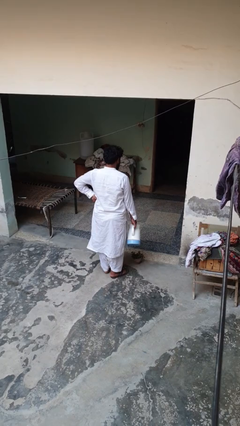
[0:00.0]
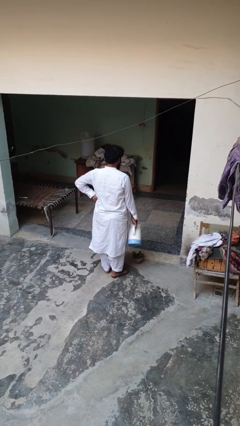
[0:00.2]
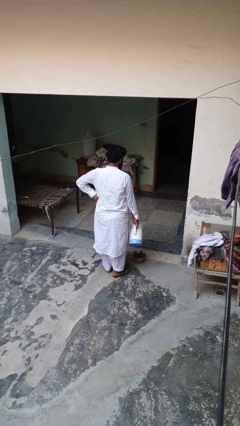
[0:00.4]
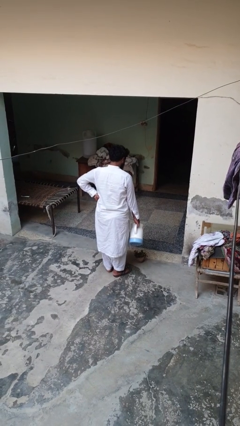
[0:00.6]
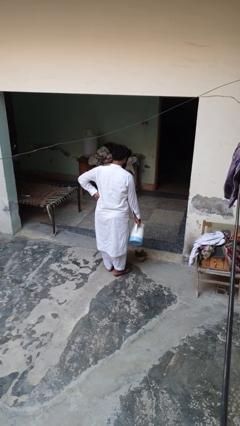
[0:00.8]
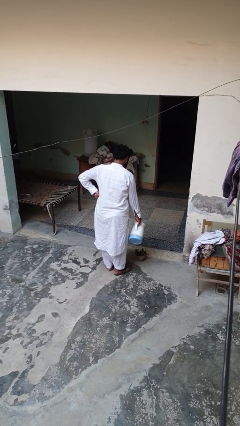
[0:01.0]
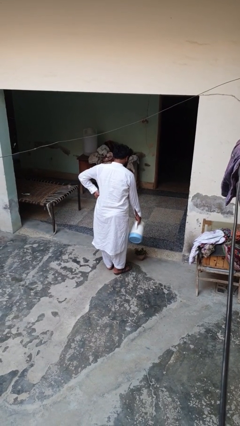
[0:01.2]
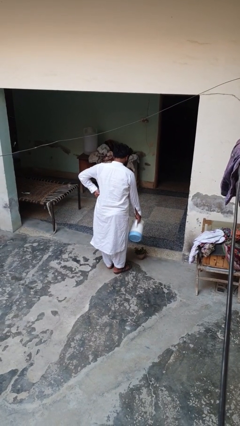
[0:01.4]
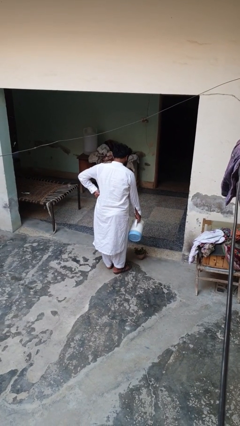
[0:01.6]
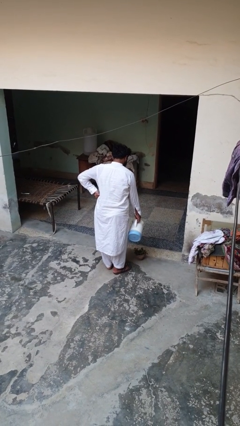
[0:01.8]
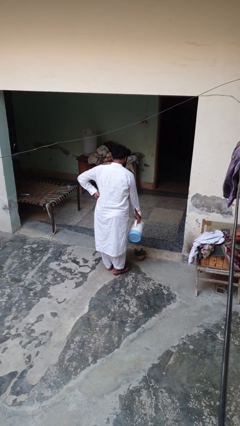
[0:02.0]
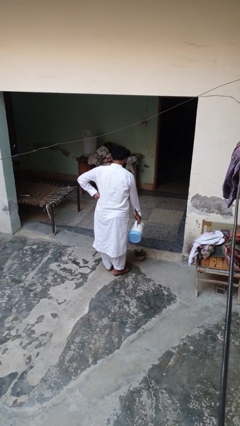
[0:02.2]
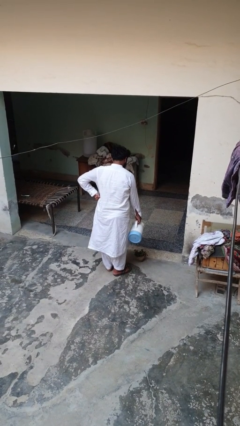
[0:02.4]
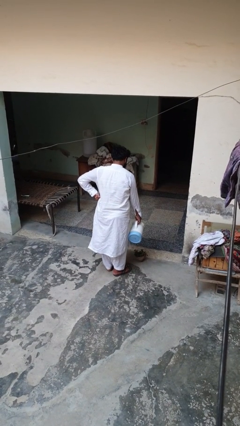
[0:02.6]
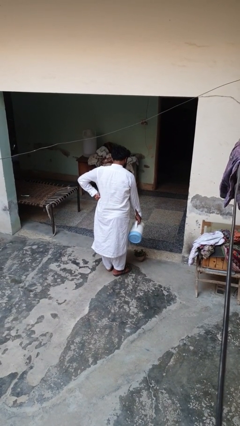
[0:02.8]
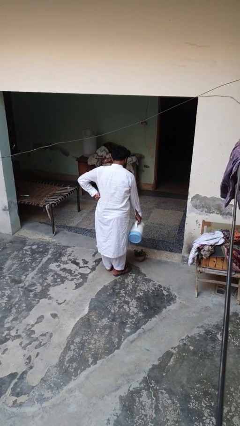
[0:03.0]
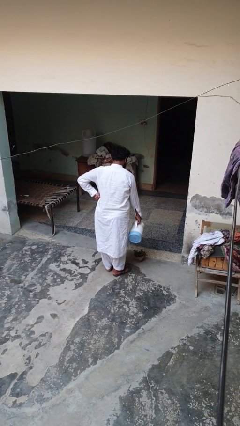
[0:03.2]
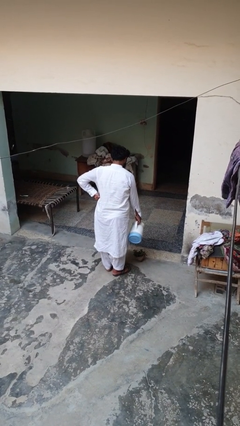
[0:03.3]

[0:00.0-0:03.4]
person waters houseplant

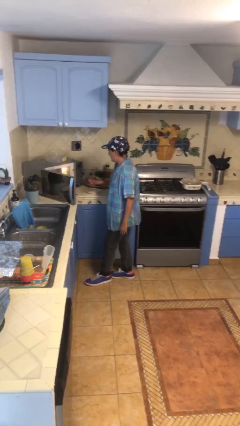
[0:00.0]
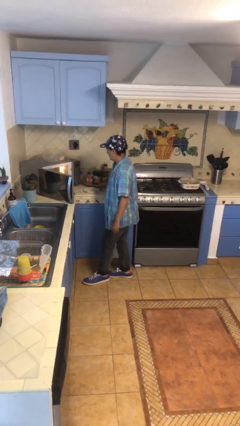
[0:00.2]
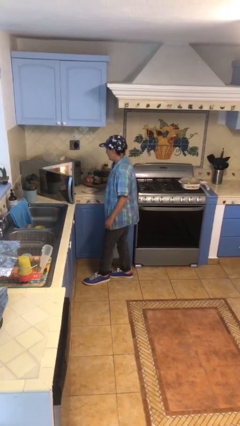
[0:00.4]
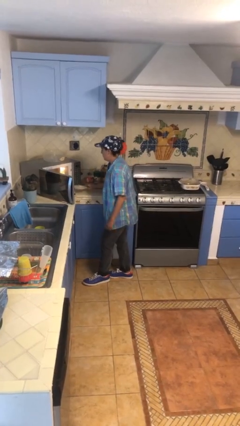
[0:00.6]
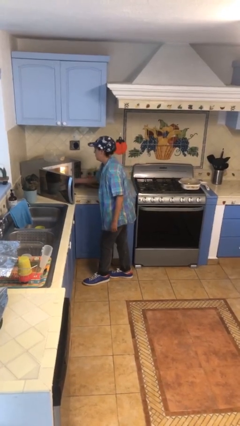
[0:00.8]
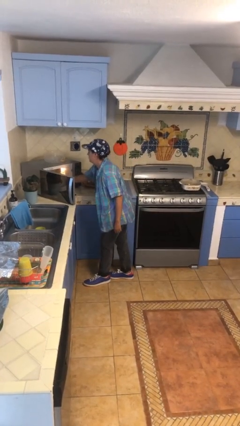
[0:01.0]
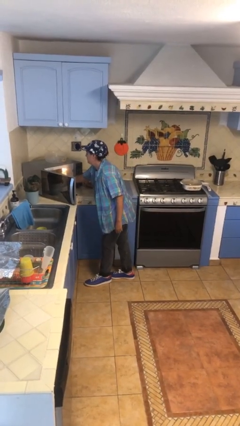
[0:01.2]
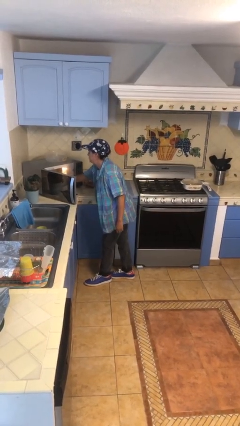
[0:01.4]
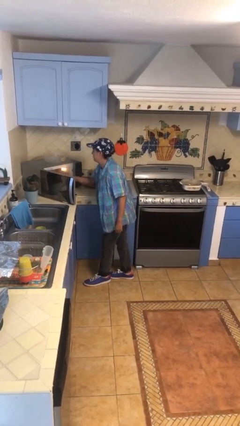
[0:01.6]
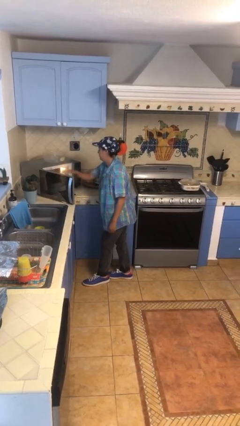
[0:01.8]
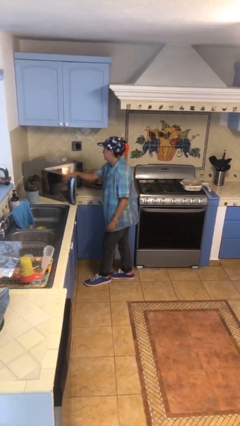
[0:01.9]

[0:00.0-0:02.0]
person puts object into microwave

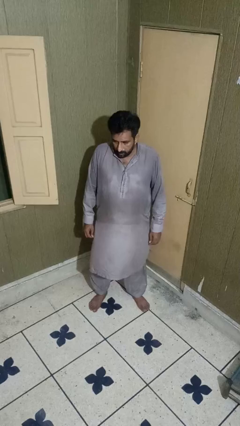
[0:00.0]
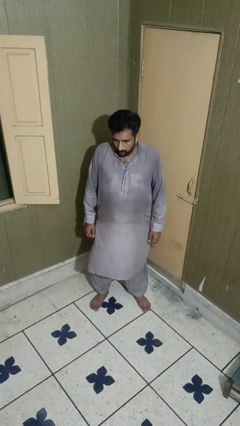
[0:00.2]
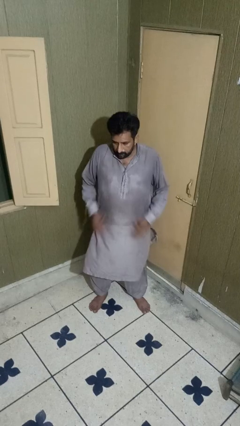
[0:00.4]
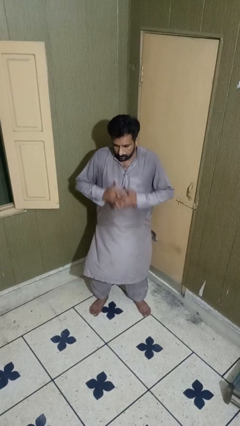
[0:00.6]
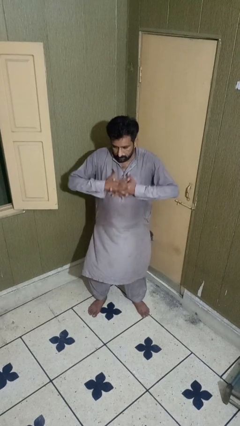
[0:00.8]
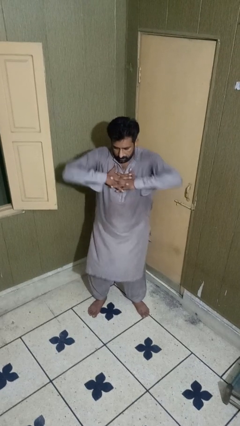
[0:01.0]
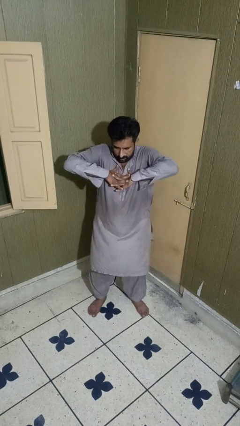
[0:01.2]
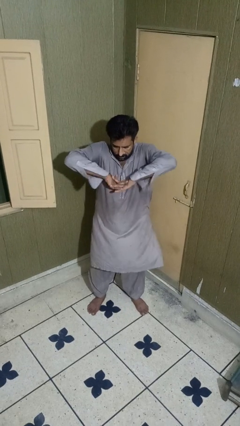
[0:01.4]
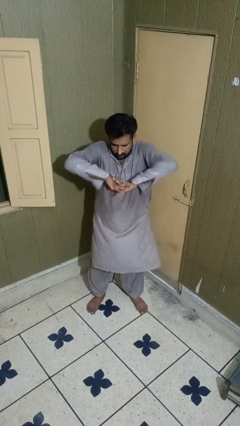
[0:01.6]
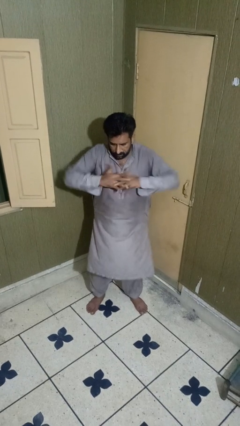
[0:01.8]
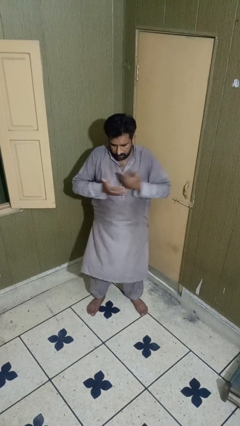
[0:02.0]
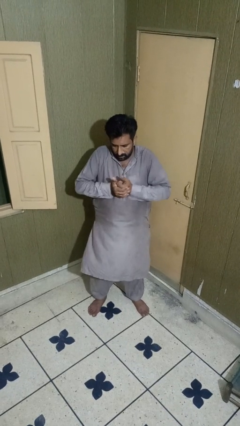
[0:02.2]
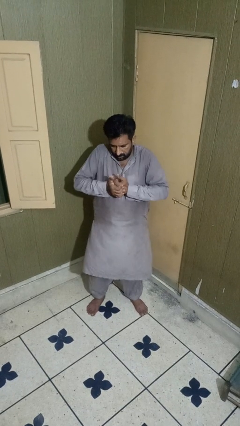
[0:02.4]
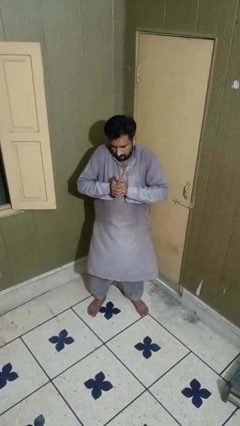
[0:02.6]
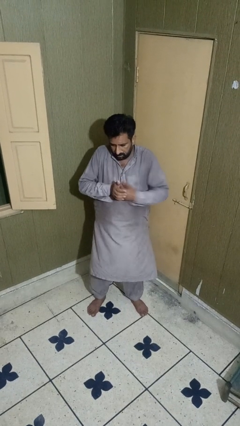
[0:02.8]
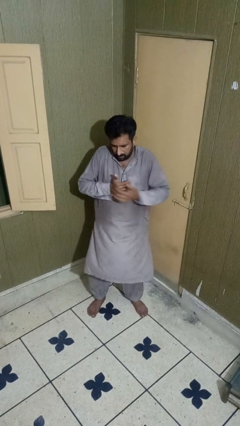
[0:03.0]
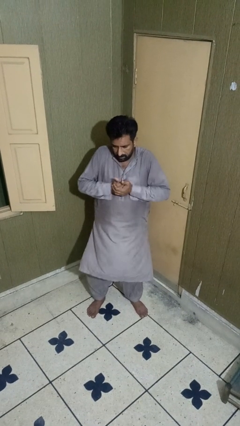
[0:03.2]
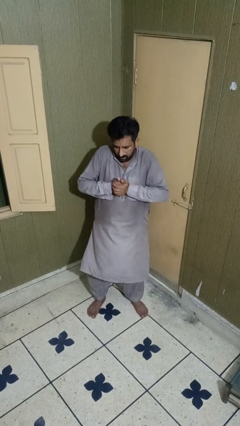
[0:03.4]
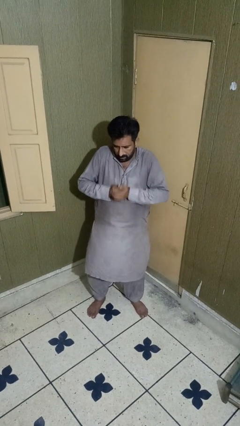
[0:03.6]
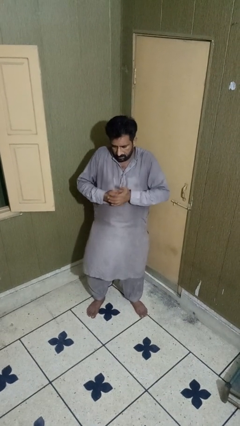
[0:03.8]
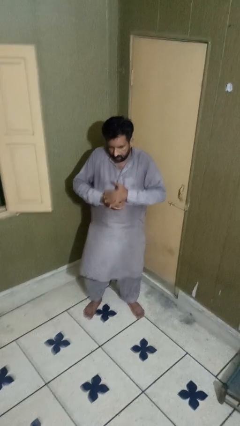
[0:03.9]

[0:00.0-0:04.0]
person cracks knuckles

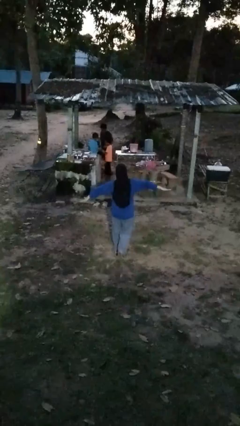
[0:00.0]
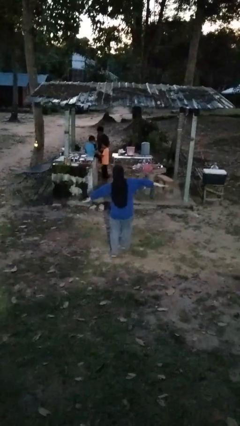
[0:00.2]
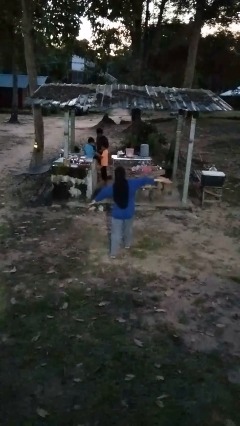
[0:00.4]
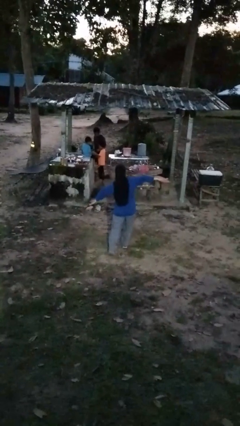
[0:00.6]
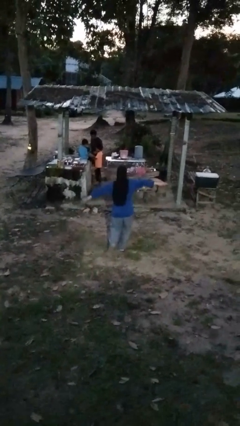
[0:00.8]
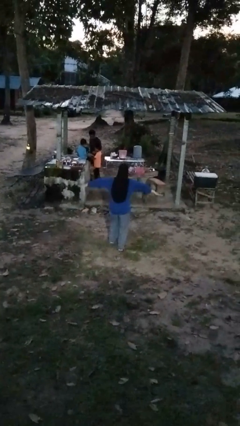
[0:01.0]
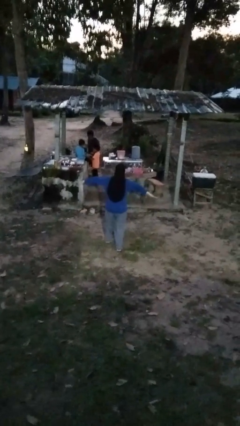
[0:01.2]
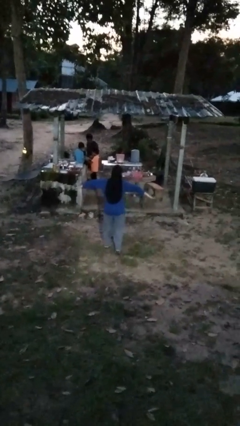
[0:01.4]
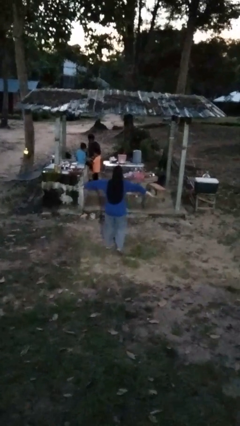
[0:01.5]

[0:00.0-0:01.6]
person walks tiptoe

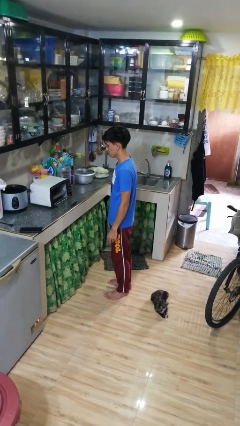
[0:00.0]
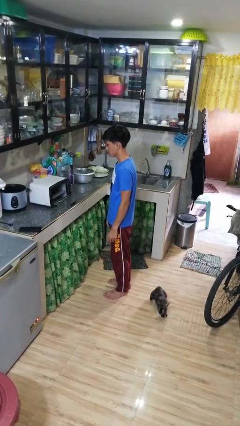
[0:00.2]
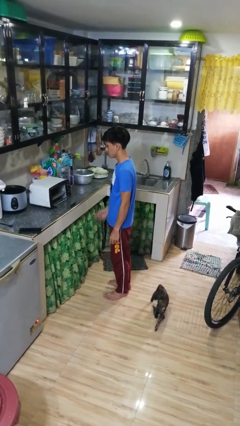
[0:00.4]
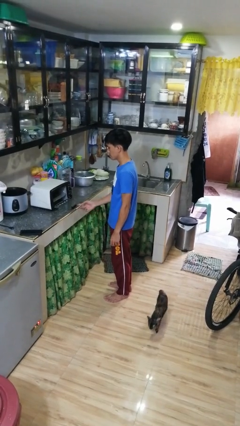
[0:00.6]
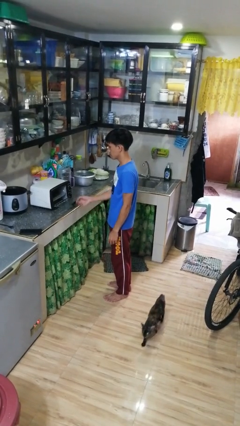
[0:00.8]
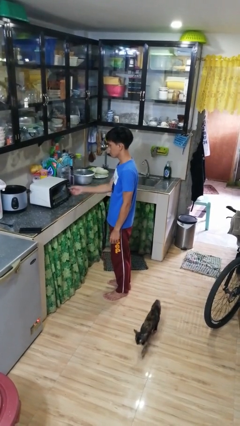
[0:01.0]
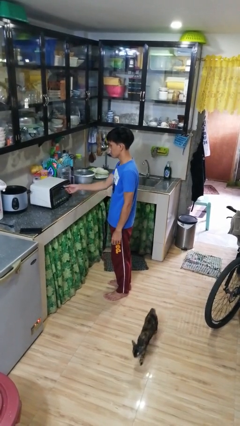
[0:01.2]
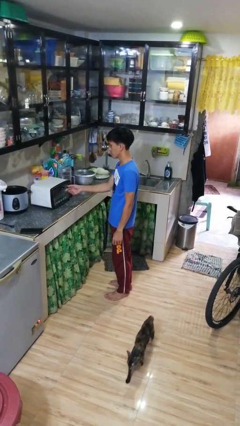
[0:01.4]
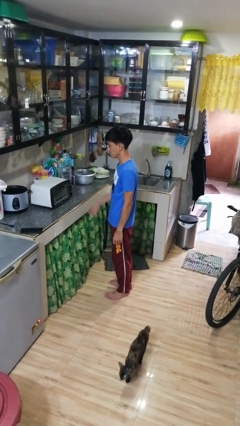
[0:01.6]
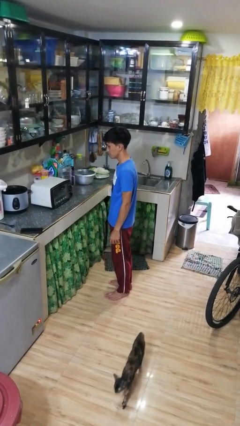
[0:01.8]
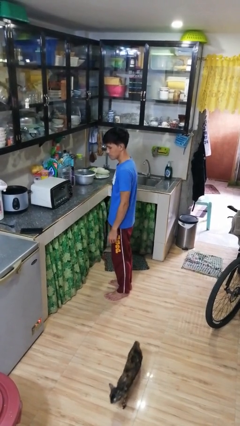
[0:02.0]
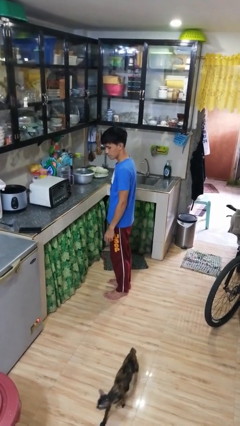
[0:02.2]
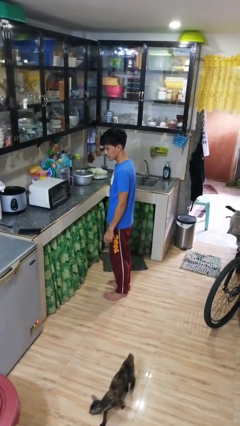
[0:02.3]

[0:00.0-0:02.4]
person closes microwave

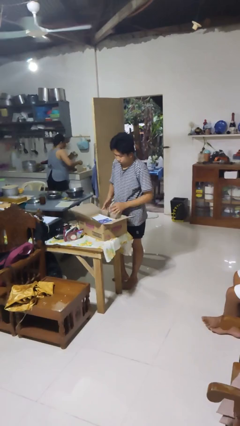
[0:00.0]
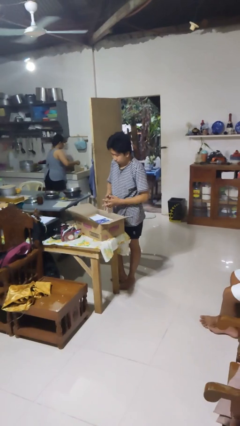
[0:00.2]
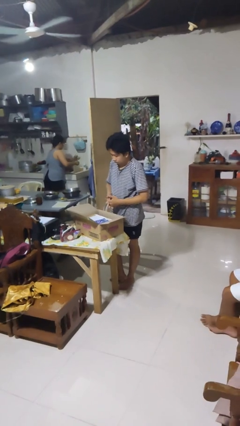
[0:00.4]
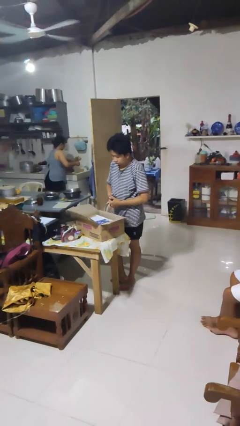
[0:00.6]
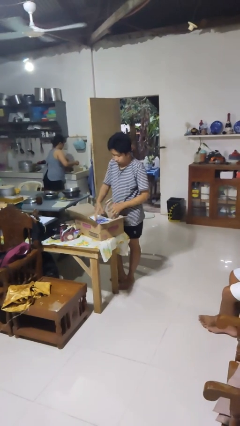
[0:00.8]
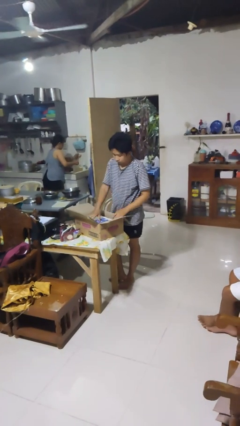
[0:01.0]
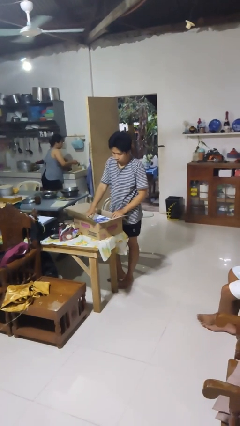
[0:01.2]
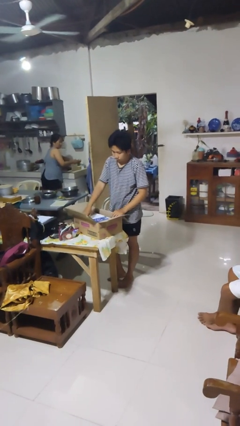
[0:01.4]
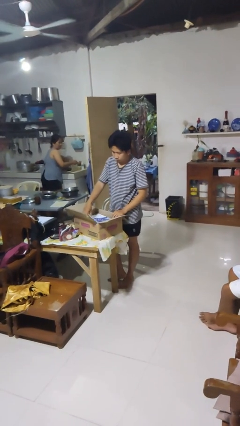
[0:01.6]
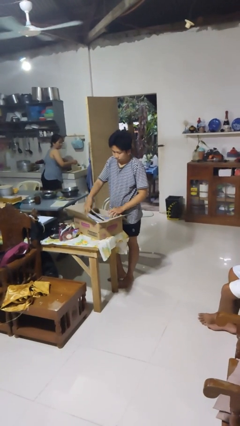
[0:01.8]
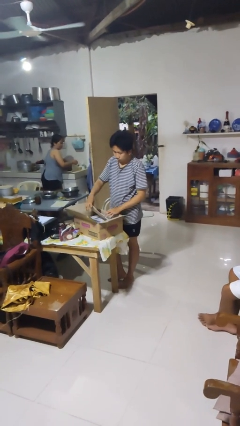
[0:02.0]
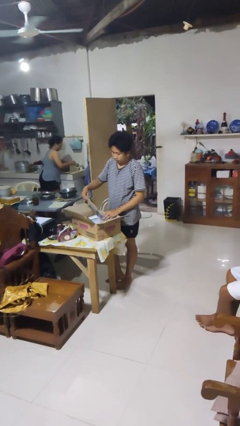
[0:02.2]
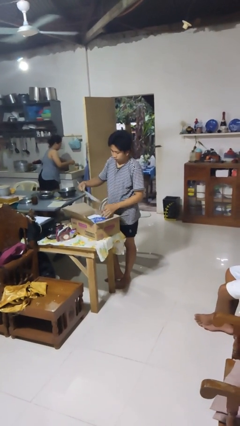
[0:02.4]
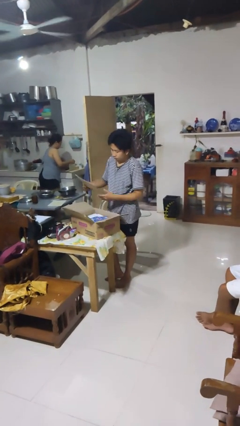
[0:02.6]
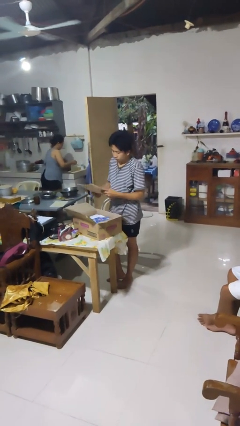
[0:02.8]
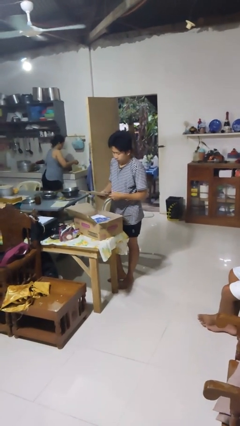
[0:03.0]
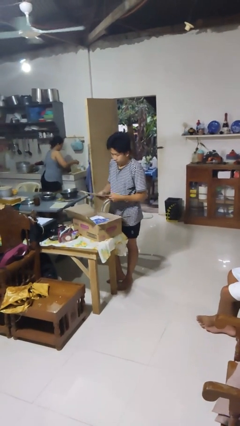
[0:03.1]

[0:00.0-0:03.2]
person takes object from box

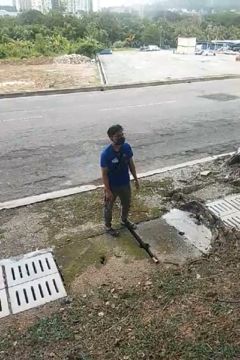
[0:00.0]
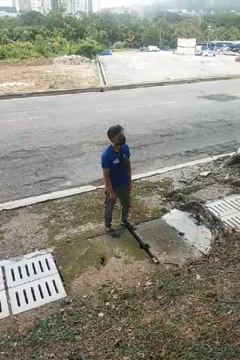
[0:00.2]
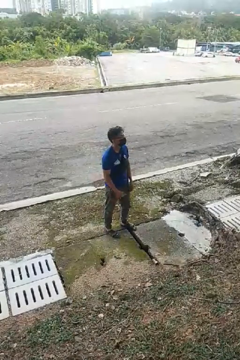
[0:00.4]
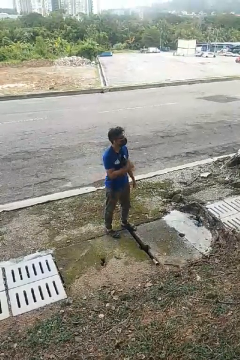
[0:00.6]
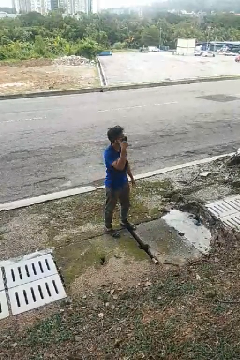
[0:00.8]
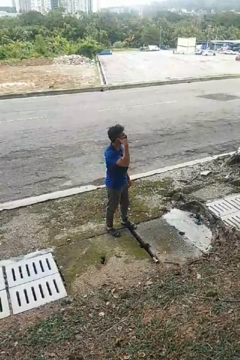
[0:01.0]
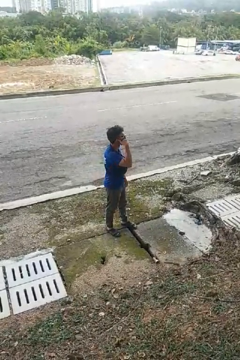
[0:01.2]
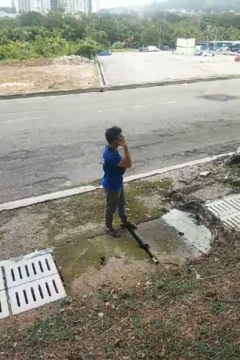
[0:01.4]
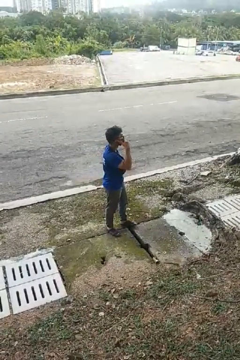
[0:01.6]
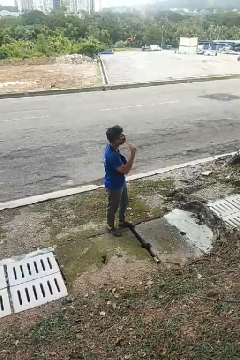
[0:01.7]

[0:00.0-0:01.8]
person gestures call me
